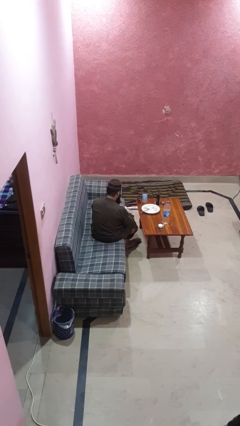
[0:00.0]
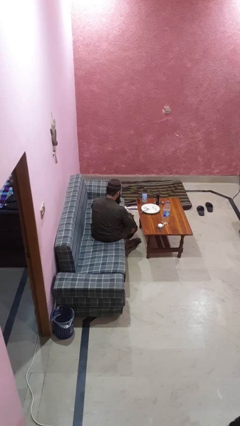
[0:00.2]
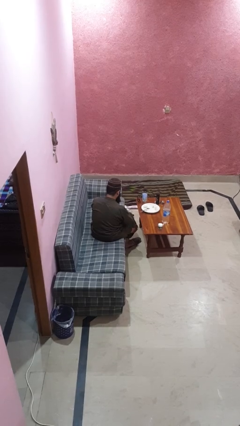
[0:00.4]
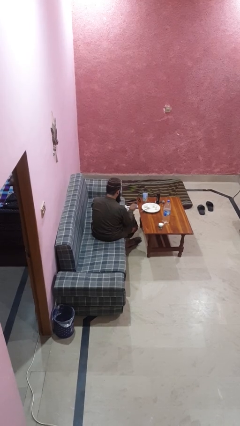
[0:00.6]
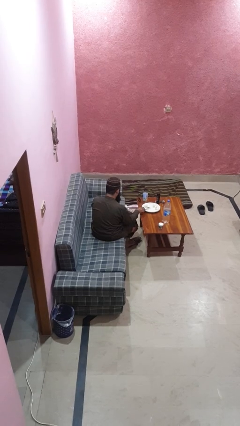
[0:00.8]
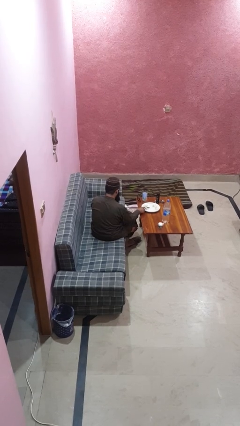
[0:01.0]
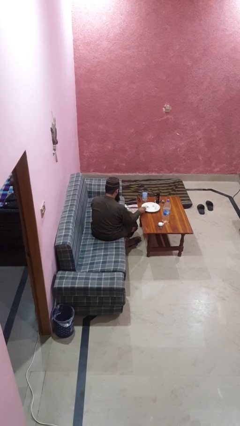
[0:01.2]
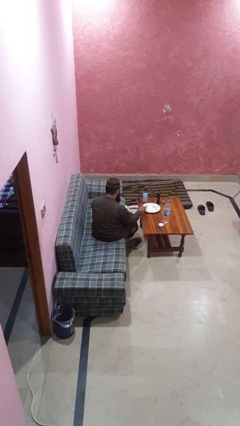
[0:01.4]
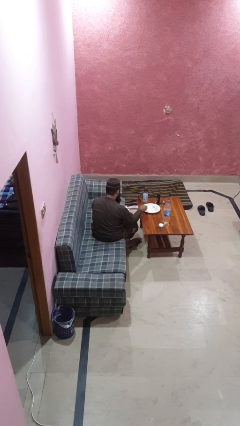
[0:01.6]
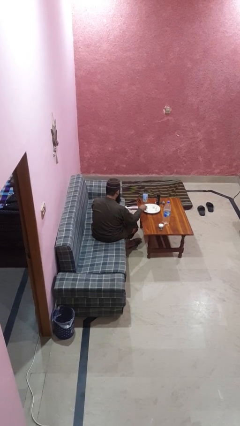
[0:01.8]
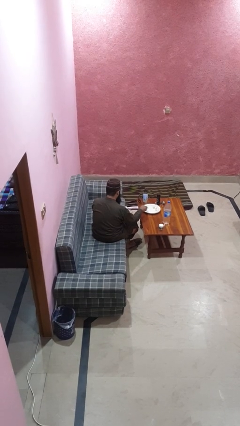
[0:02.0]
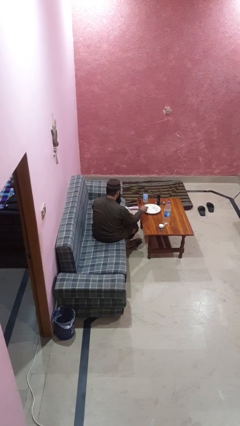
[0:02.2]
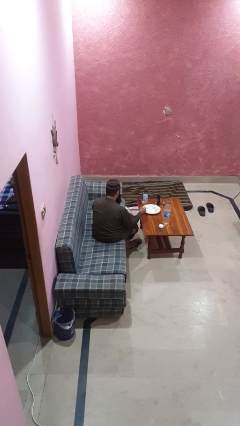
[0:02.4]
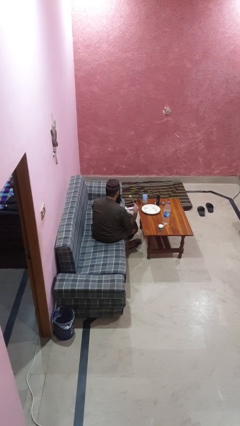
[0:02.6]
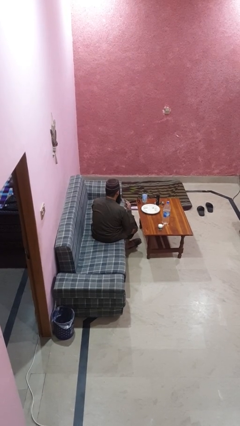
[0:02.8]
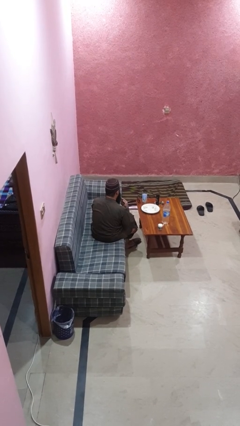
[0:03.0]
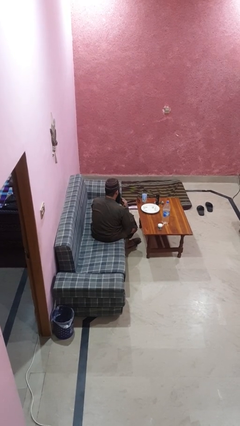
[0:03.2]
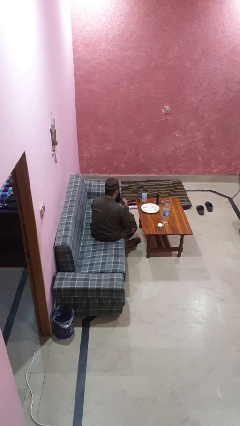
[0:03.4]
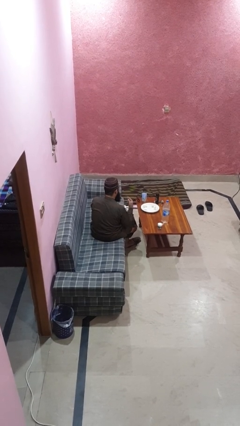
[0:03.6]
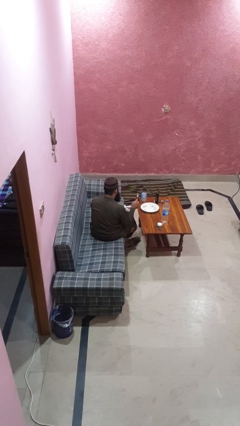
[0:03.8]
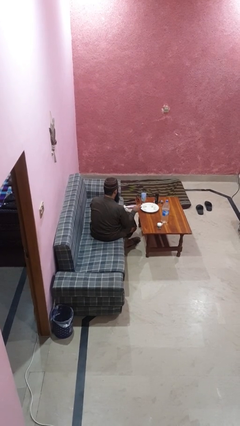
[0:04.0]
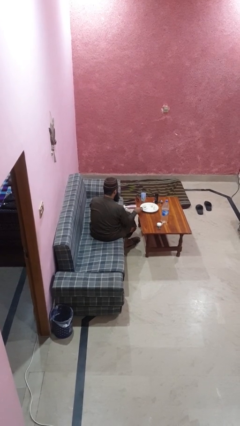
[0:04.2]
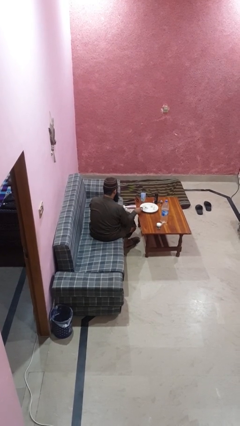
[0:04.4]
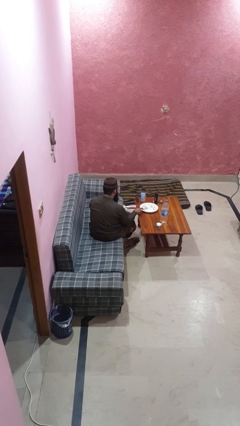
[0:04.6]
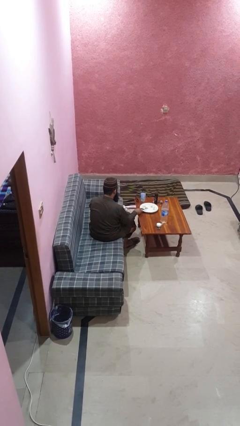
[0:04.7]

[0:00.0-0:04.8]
person eats with utensil

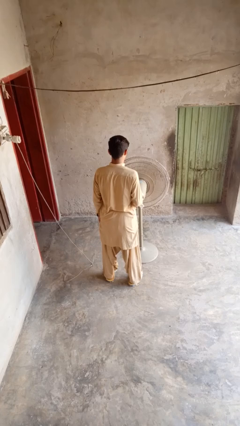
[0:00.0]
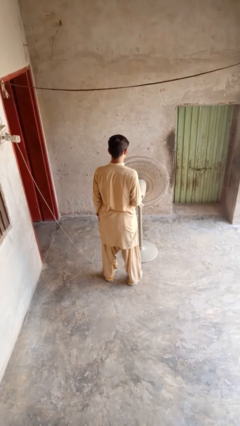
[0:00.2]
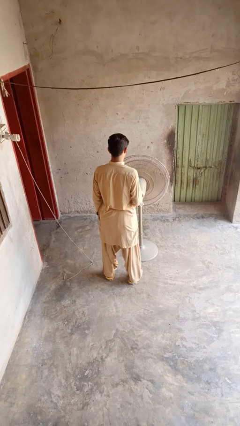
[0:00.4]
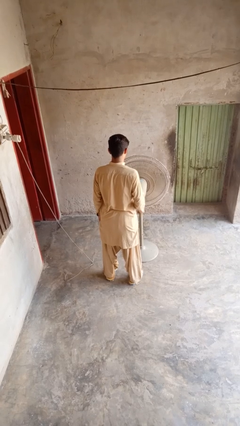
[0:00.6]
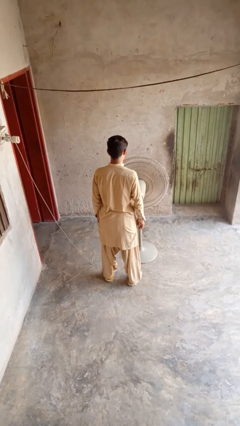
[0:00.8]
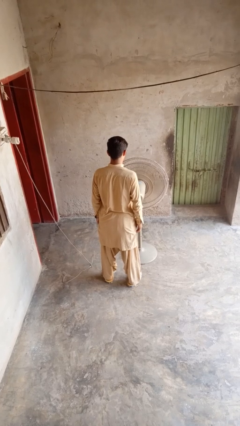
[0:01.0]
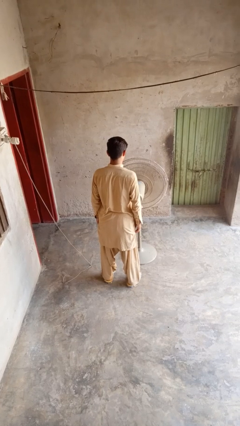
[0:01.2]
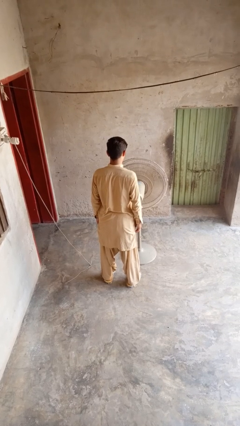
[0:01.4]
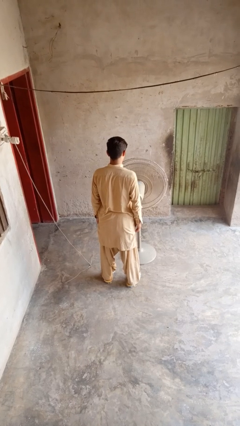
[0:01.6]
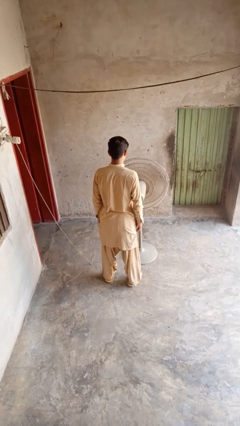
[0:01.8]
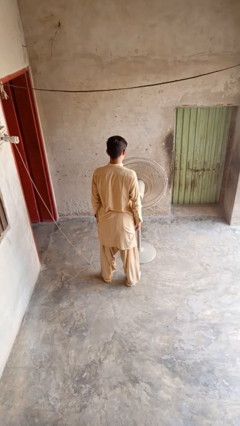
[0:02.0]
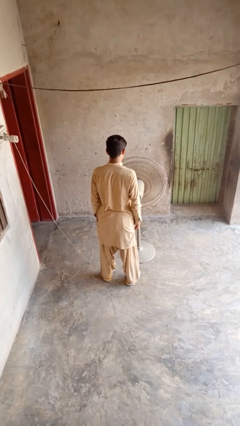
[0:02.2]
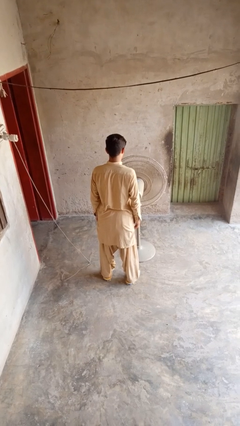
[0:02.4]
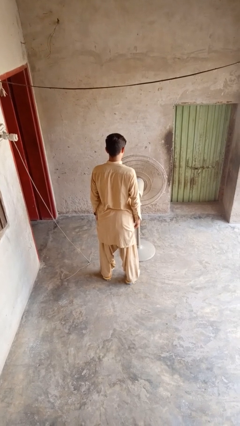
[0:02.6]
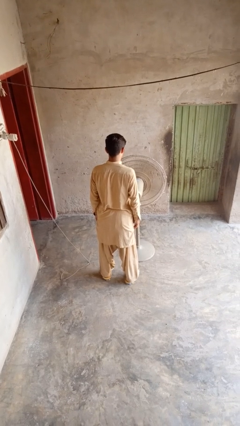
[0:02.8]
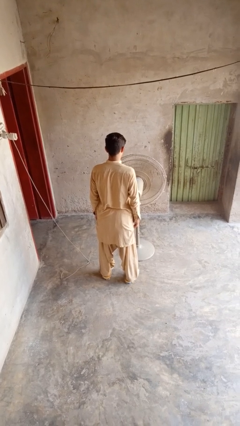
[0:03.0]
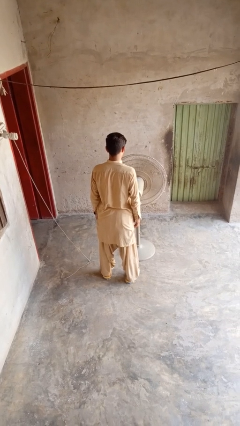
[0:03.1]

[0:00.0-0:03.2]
person turns off fan

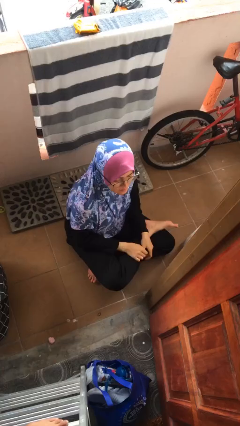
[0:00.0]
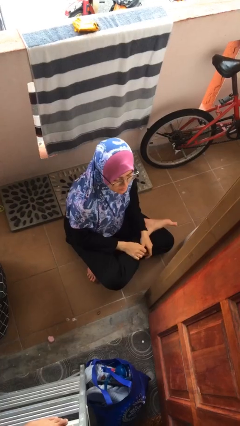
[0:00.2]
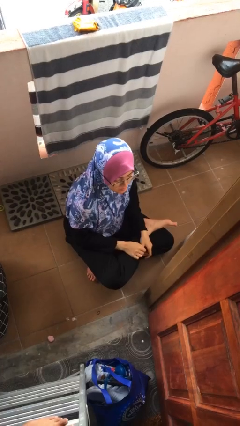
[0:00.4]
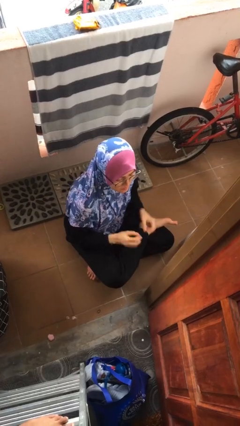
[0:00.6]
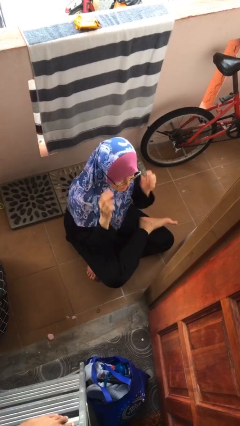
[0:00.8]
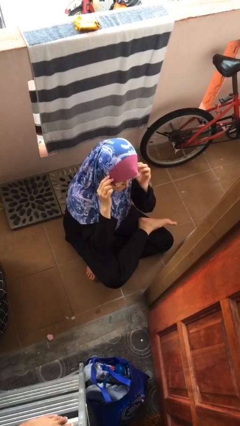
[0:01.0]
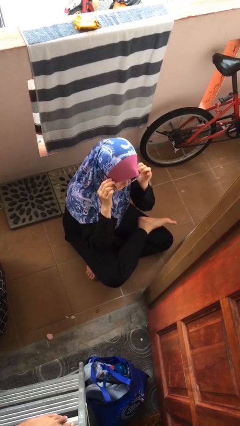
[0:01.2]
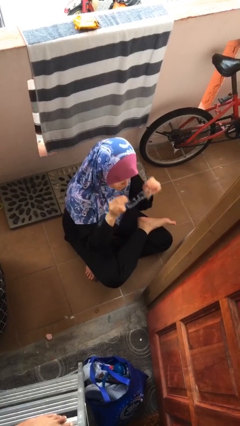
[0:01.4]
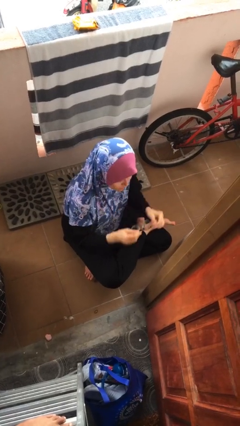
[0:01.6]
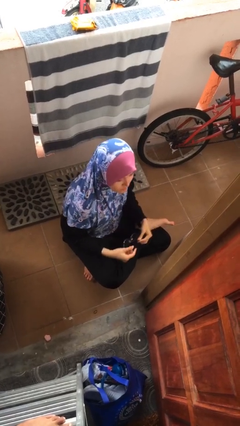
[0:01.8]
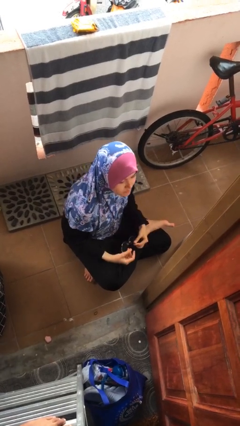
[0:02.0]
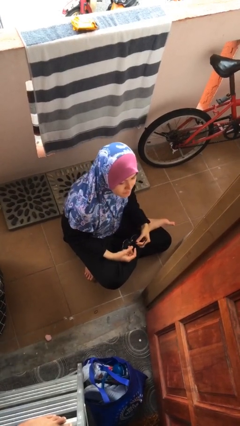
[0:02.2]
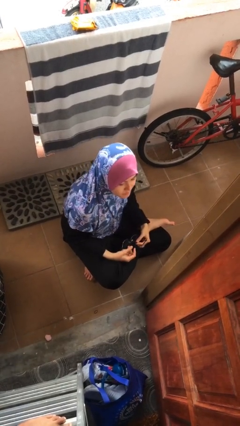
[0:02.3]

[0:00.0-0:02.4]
person takes off glasses

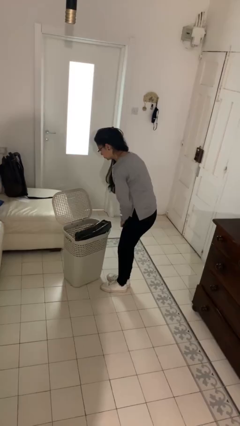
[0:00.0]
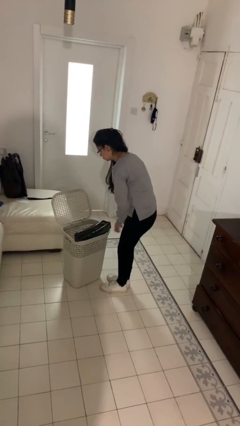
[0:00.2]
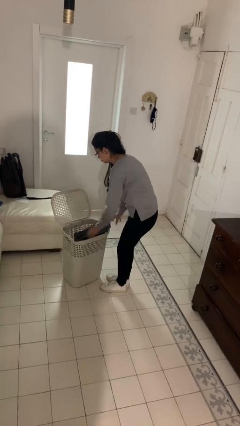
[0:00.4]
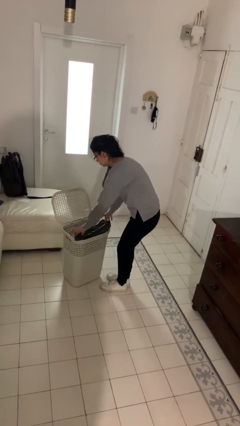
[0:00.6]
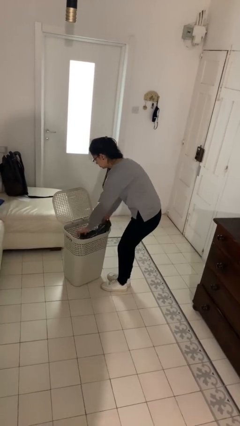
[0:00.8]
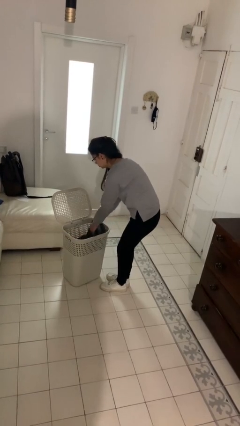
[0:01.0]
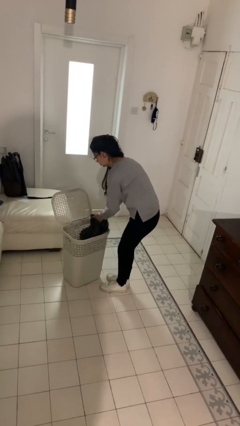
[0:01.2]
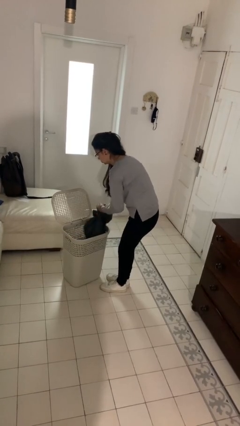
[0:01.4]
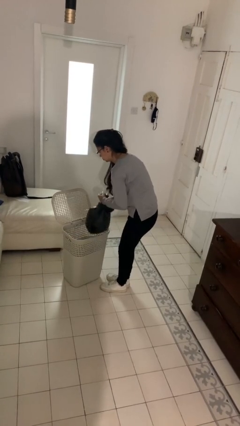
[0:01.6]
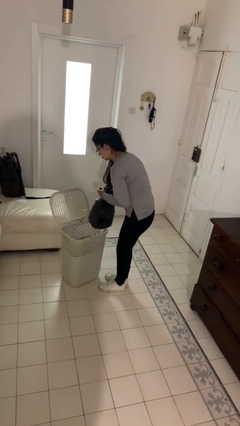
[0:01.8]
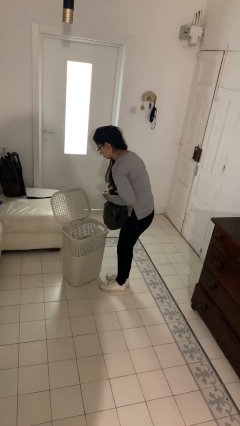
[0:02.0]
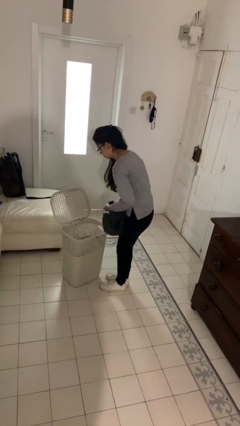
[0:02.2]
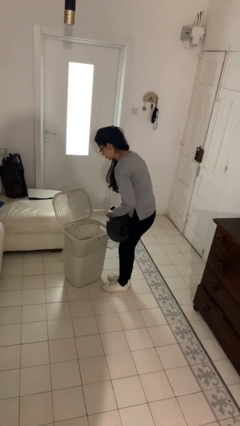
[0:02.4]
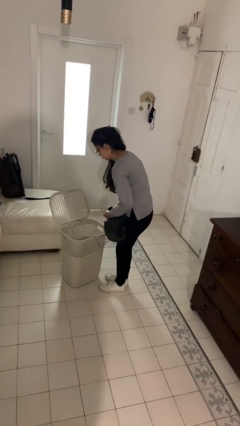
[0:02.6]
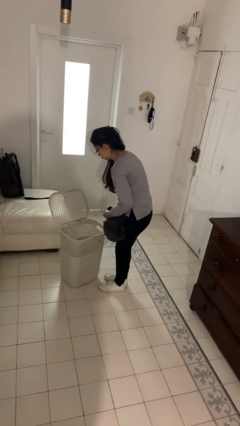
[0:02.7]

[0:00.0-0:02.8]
person removes trashbag from trashcan

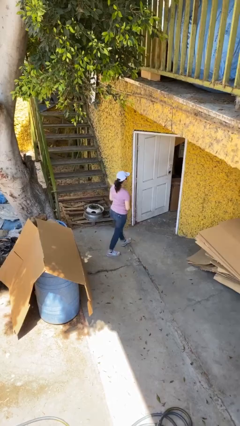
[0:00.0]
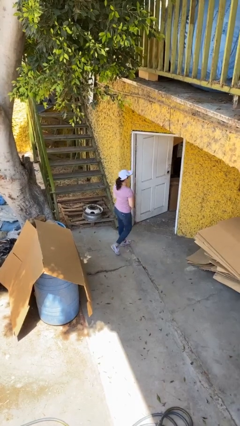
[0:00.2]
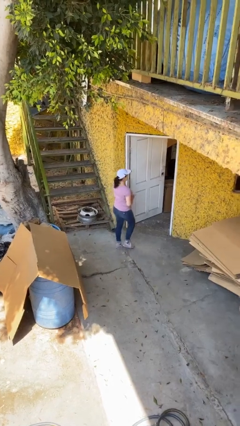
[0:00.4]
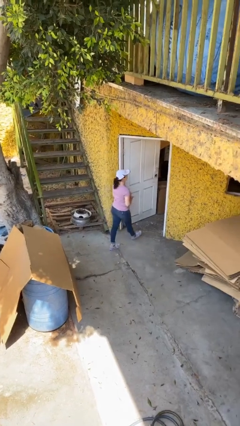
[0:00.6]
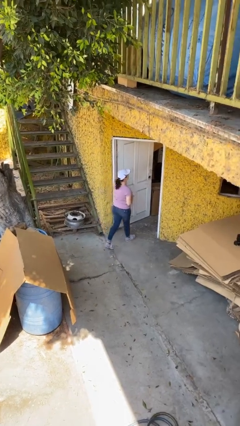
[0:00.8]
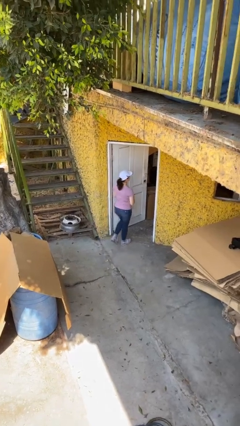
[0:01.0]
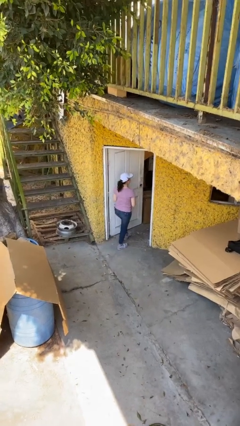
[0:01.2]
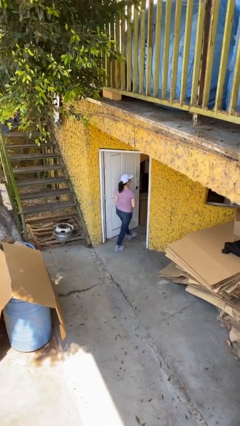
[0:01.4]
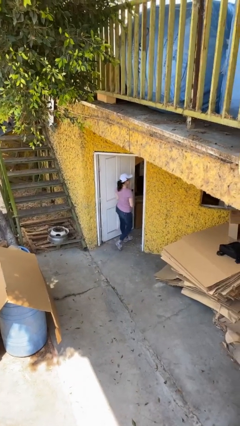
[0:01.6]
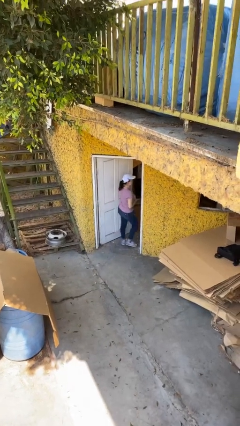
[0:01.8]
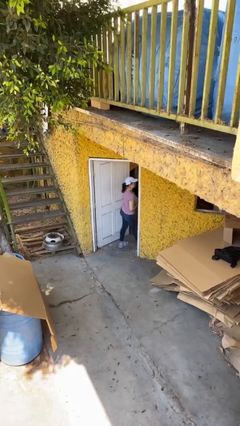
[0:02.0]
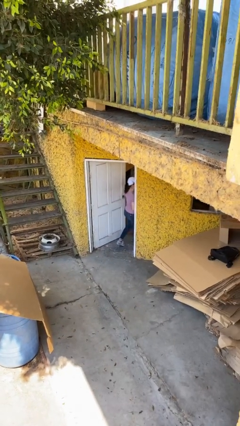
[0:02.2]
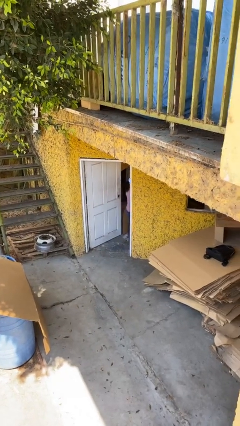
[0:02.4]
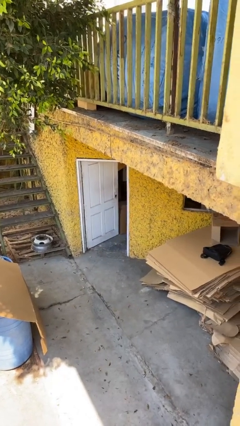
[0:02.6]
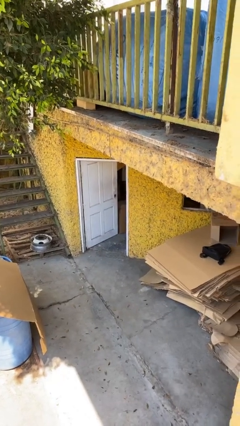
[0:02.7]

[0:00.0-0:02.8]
person exits scene through structure

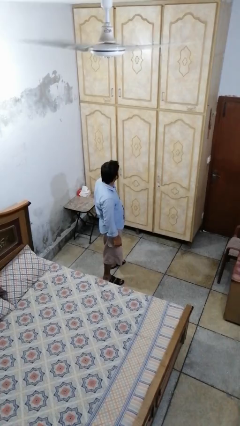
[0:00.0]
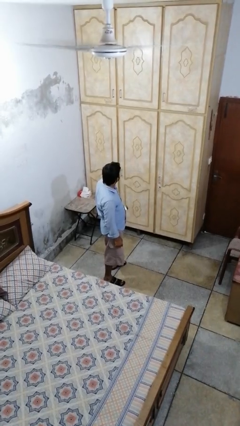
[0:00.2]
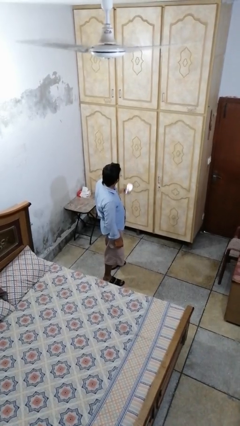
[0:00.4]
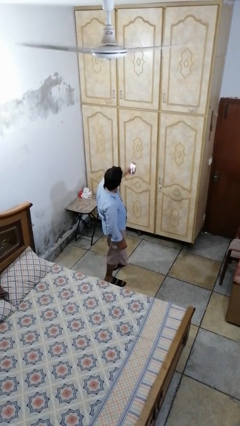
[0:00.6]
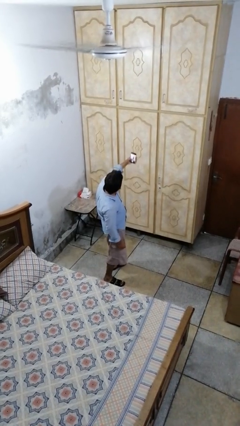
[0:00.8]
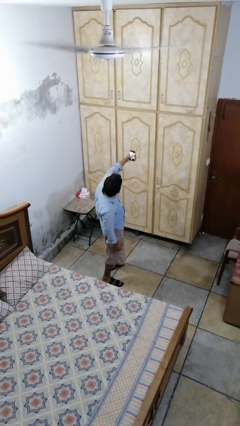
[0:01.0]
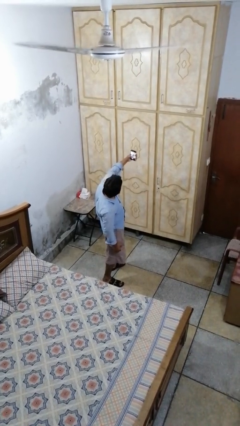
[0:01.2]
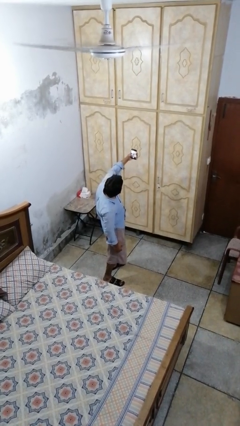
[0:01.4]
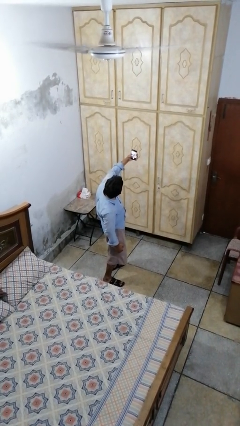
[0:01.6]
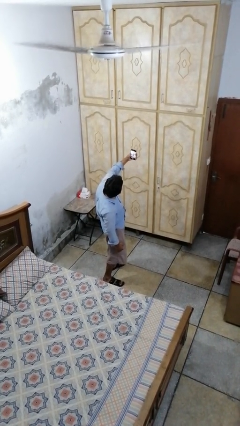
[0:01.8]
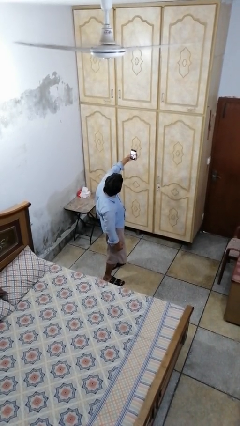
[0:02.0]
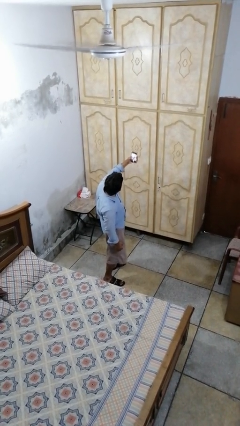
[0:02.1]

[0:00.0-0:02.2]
person takes selfie
